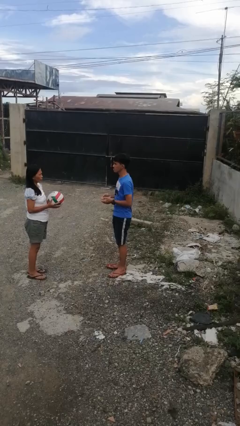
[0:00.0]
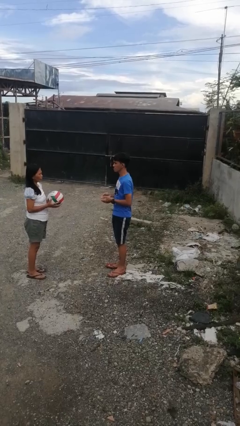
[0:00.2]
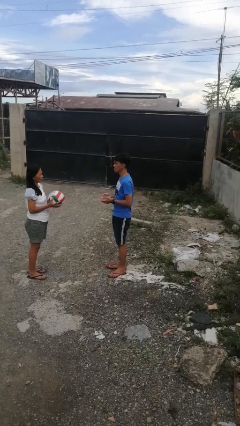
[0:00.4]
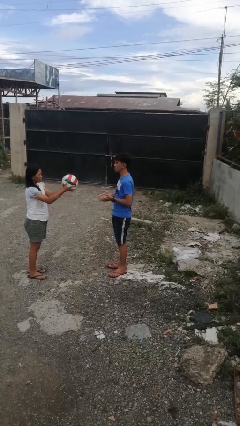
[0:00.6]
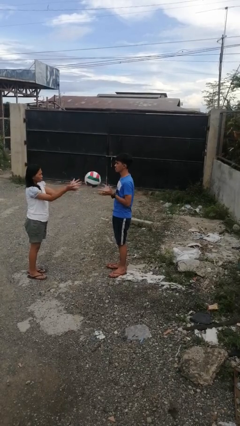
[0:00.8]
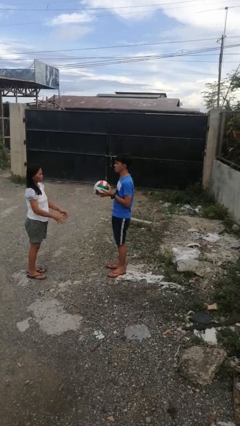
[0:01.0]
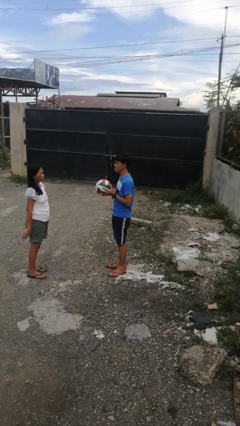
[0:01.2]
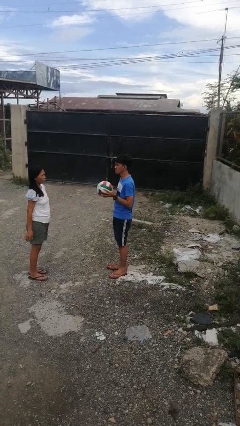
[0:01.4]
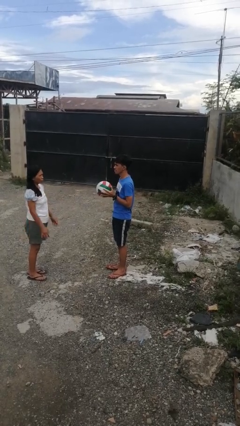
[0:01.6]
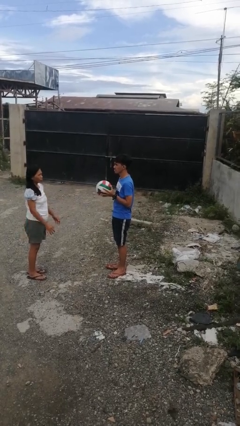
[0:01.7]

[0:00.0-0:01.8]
person catches object from person

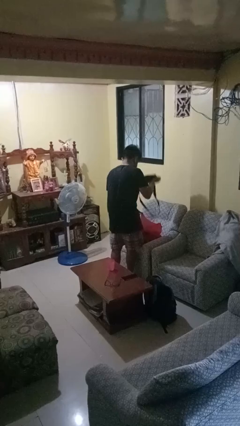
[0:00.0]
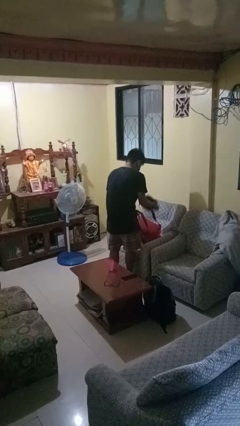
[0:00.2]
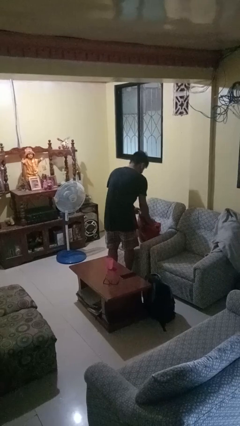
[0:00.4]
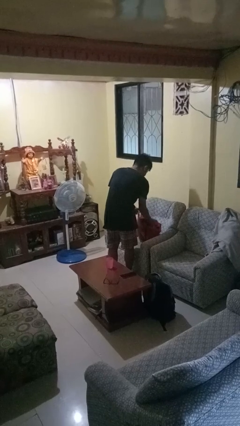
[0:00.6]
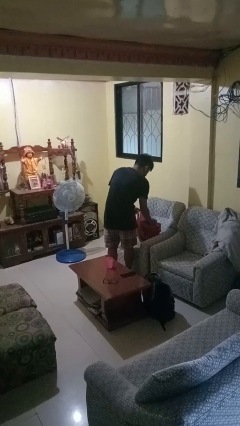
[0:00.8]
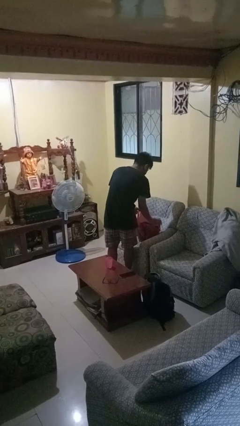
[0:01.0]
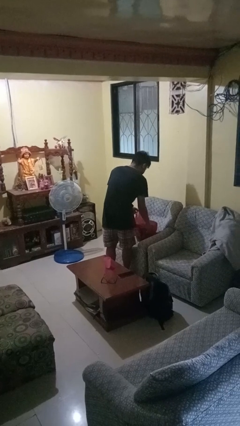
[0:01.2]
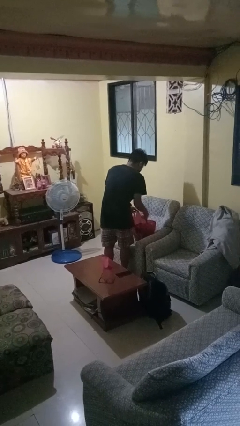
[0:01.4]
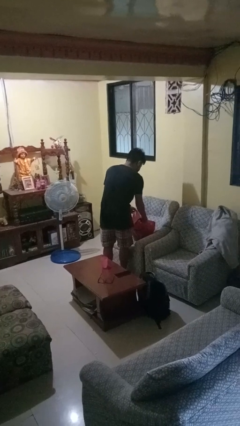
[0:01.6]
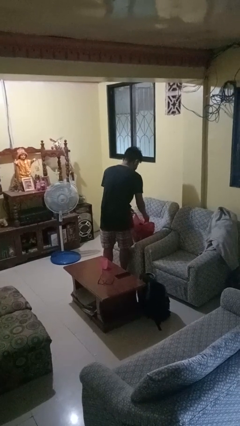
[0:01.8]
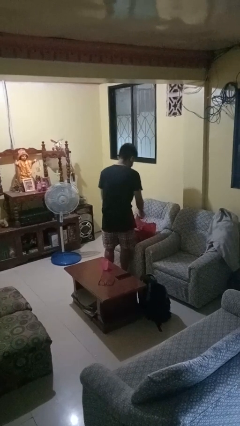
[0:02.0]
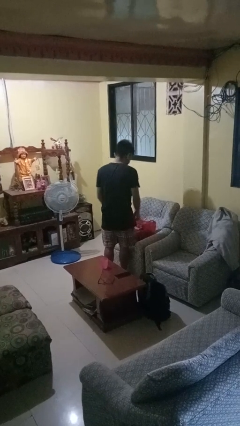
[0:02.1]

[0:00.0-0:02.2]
person puts object into bag

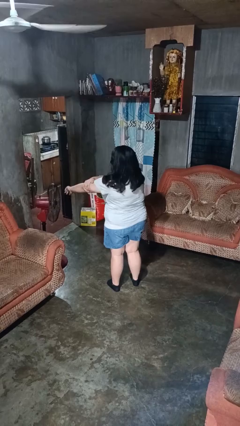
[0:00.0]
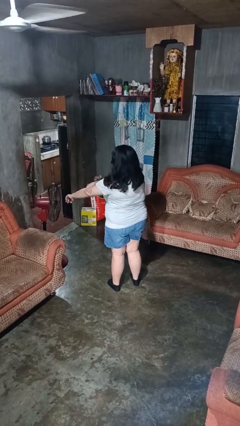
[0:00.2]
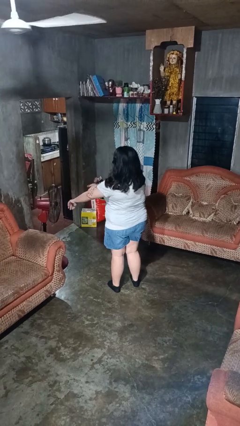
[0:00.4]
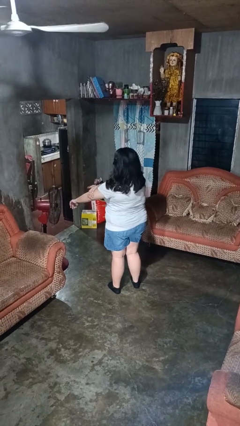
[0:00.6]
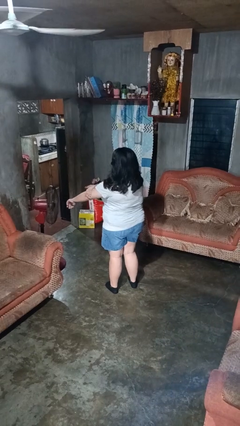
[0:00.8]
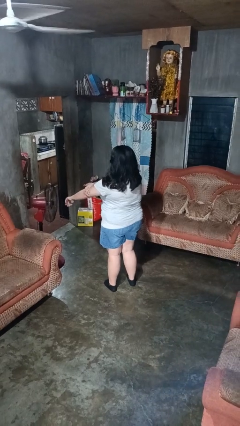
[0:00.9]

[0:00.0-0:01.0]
person swats bug

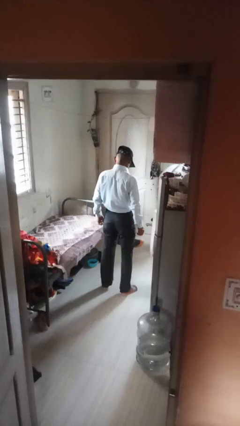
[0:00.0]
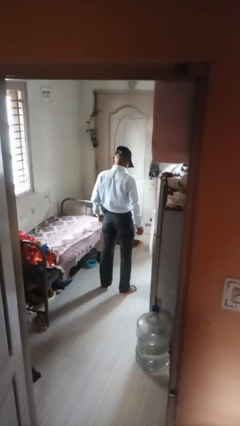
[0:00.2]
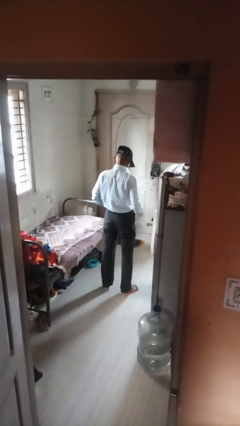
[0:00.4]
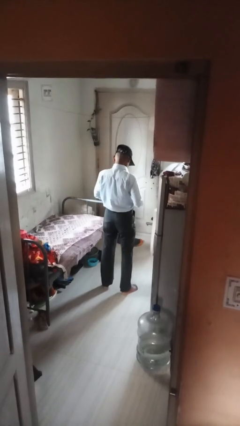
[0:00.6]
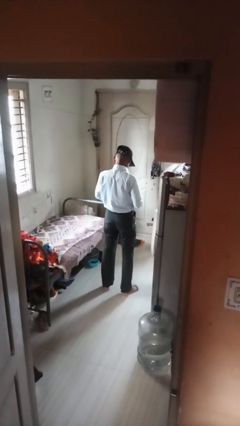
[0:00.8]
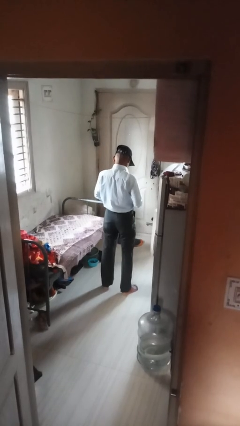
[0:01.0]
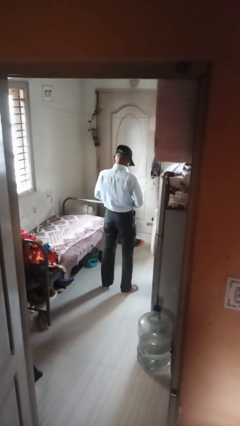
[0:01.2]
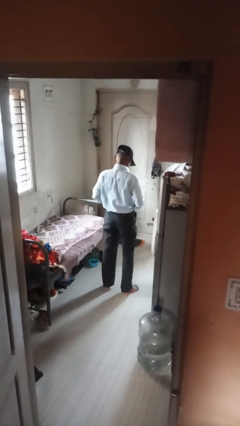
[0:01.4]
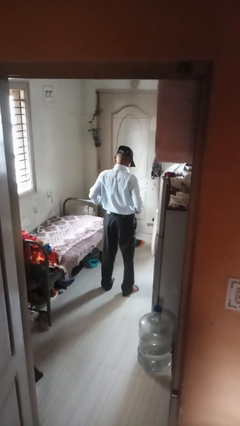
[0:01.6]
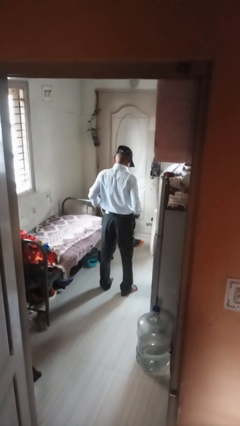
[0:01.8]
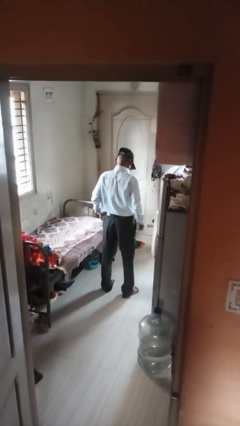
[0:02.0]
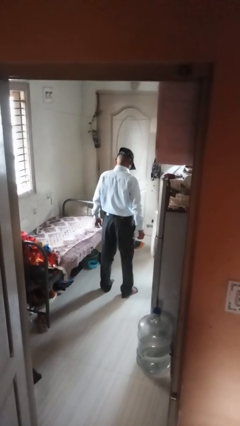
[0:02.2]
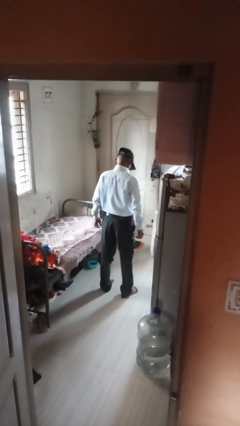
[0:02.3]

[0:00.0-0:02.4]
person hikes up pants

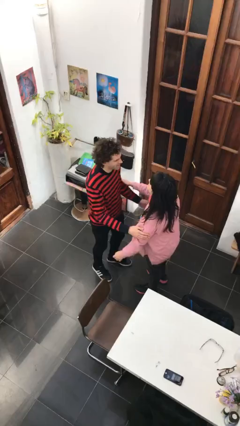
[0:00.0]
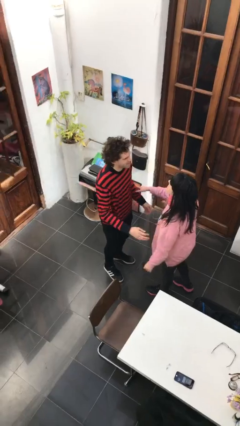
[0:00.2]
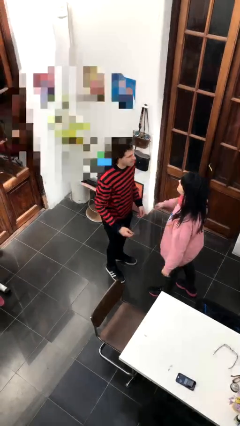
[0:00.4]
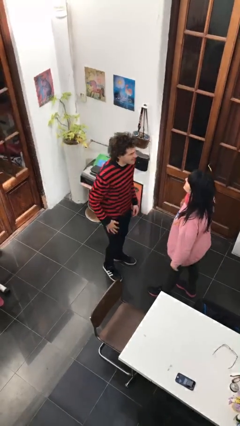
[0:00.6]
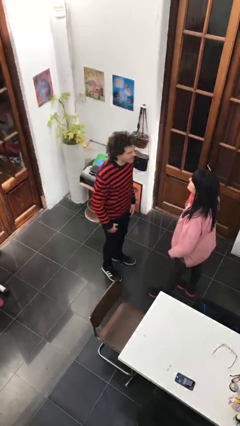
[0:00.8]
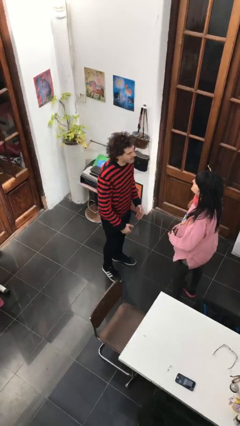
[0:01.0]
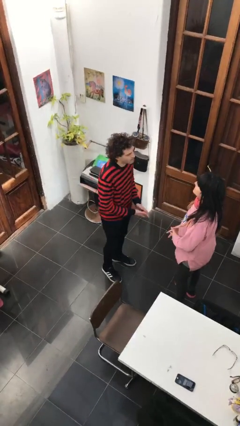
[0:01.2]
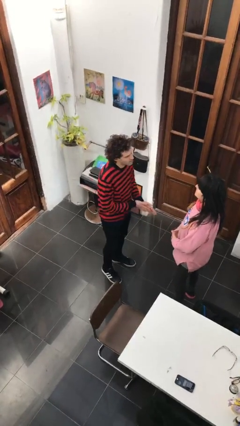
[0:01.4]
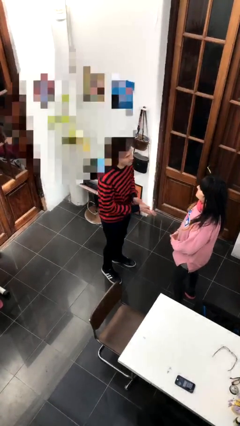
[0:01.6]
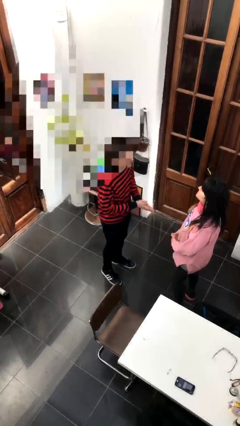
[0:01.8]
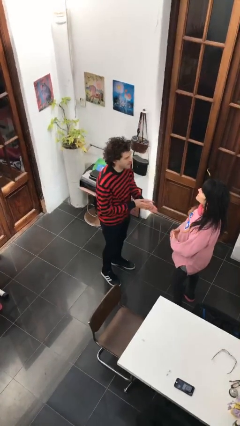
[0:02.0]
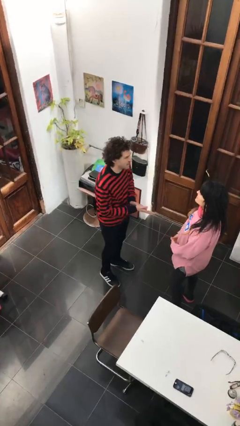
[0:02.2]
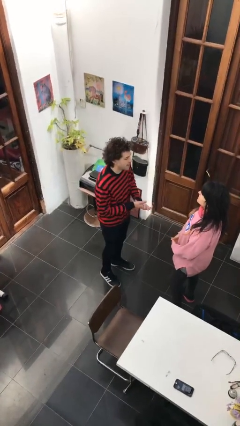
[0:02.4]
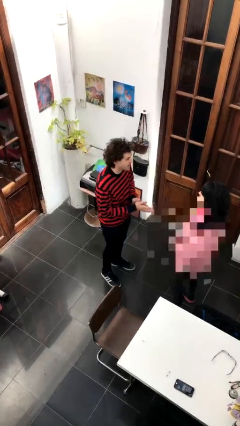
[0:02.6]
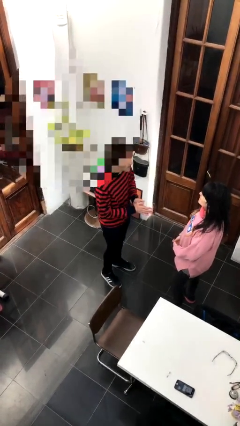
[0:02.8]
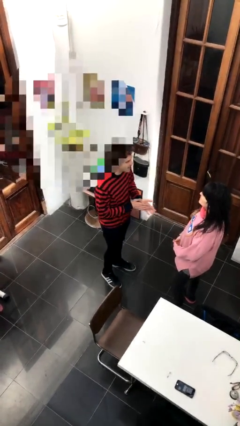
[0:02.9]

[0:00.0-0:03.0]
person talks to person

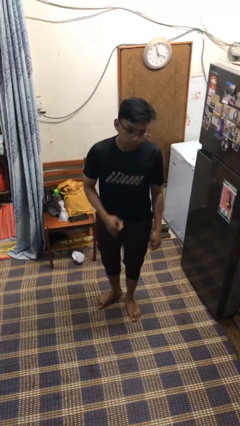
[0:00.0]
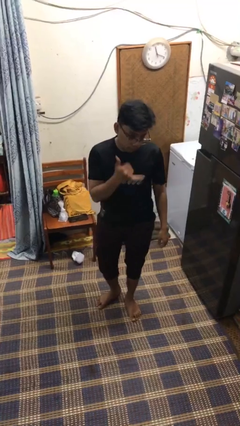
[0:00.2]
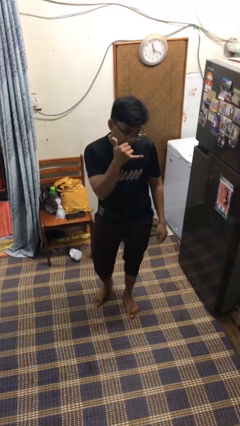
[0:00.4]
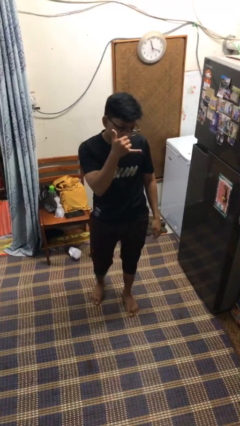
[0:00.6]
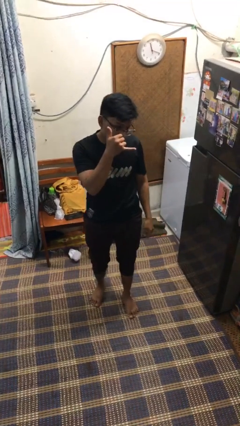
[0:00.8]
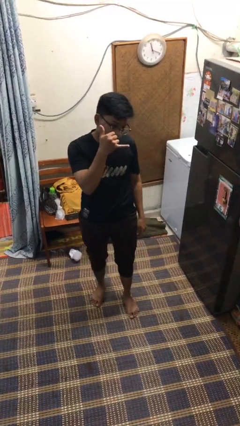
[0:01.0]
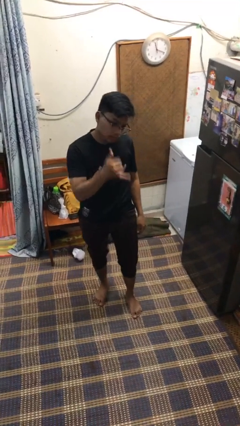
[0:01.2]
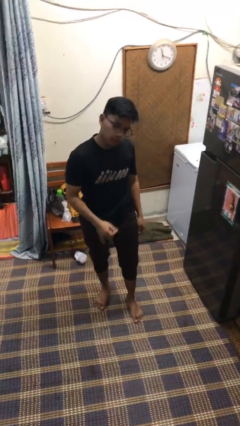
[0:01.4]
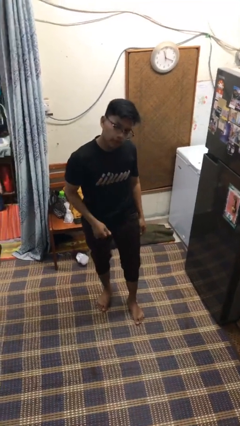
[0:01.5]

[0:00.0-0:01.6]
person gestures hang loose

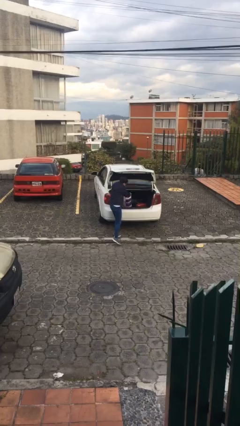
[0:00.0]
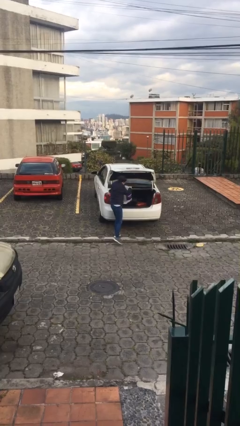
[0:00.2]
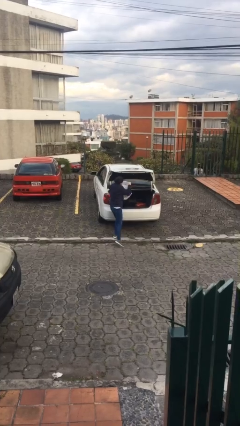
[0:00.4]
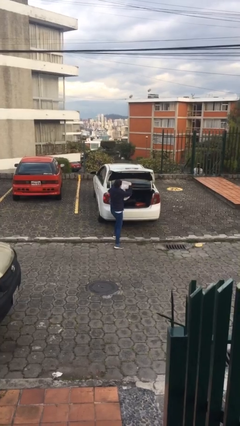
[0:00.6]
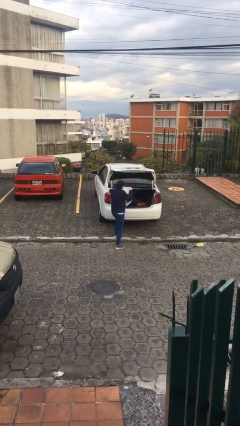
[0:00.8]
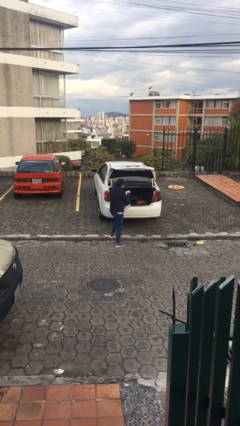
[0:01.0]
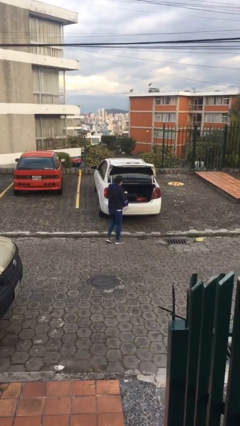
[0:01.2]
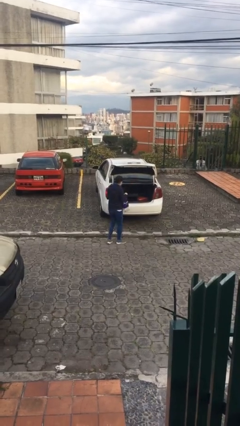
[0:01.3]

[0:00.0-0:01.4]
person unloads car

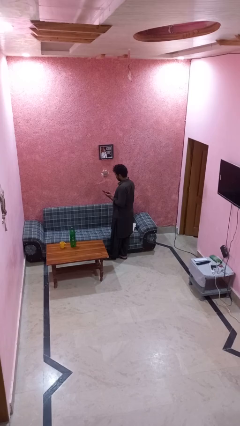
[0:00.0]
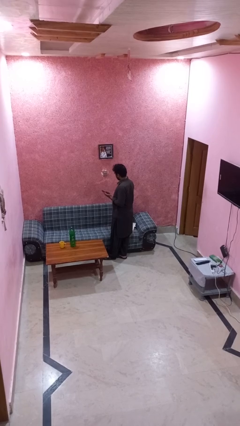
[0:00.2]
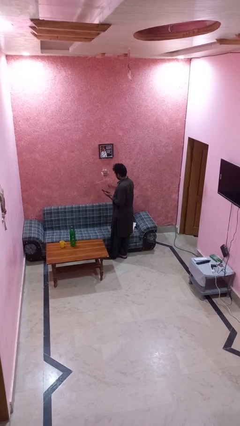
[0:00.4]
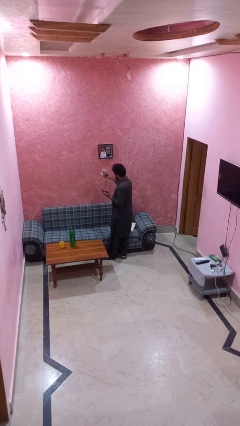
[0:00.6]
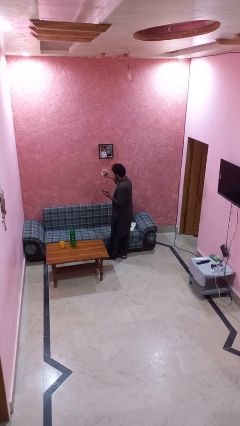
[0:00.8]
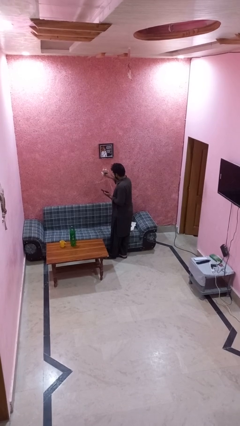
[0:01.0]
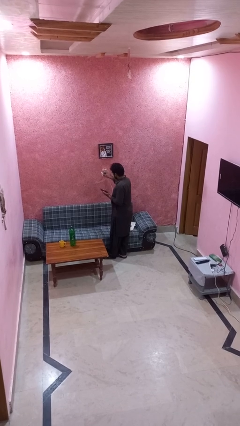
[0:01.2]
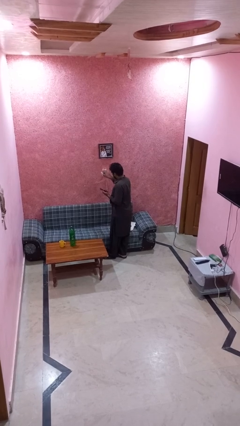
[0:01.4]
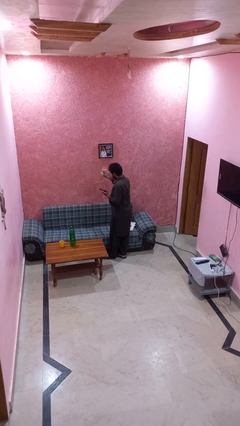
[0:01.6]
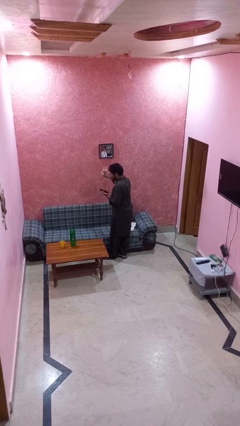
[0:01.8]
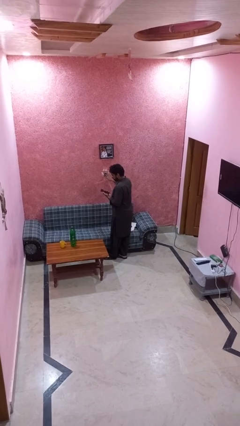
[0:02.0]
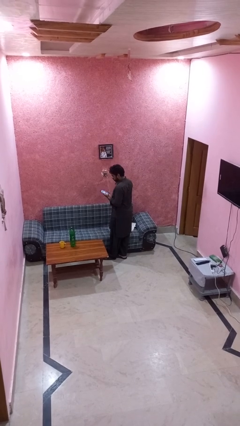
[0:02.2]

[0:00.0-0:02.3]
person plugs into electrical socket

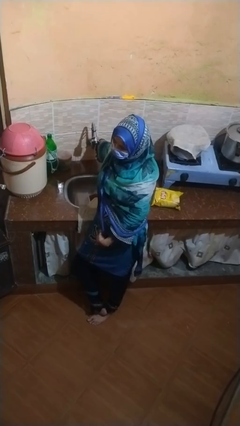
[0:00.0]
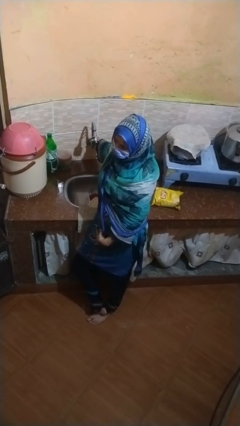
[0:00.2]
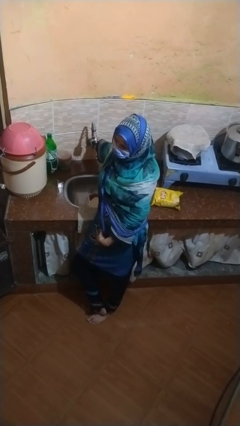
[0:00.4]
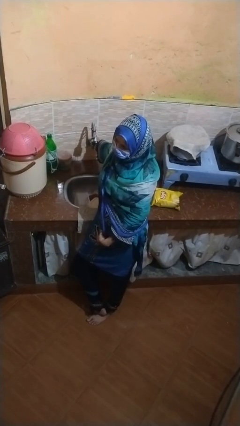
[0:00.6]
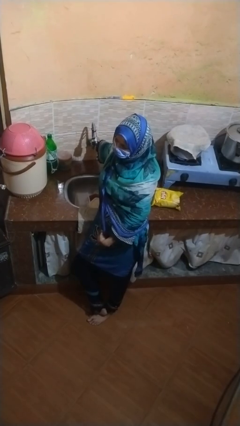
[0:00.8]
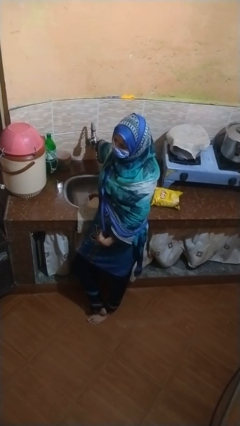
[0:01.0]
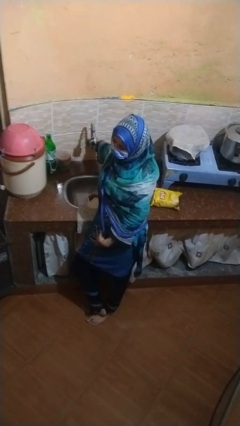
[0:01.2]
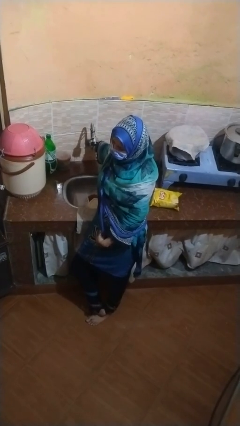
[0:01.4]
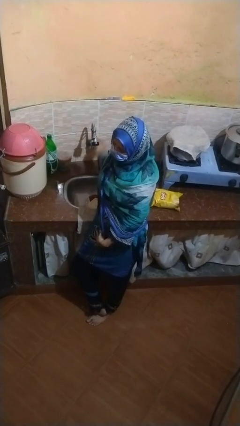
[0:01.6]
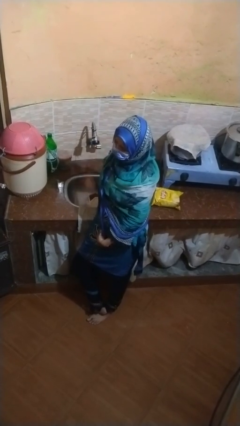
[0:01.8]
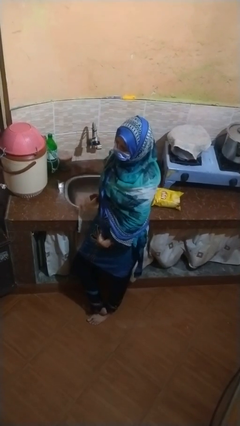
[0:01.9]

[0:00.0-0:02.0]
person turns off faucet
